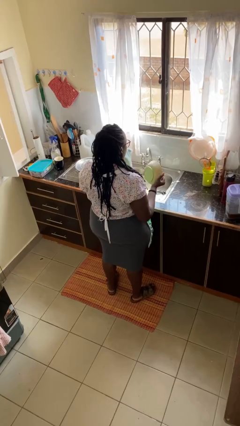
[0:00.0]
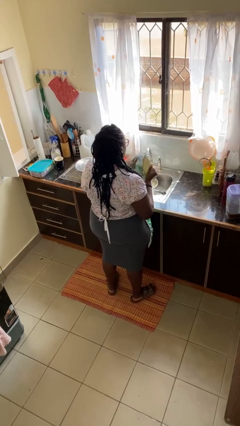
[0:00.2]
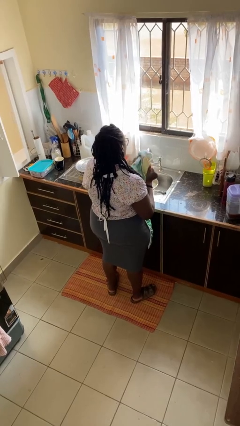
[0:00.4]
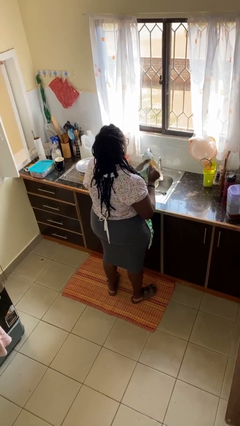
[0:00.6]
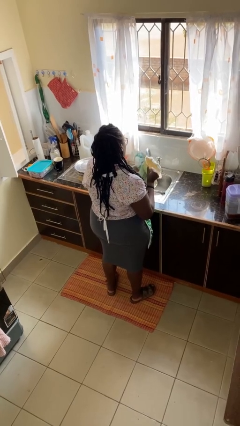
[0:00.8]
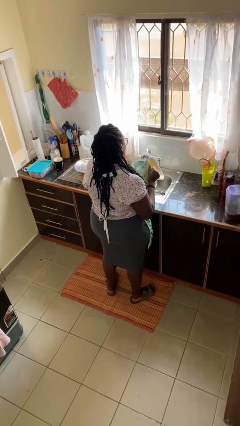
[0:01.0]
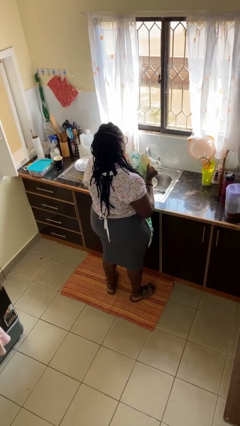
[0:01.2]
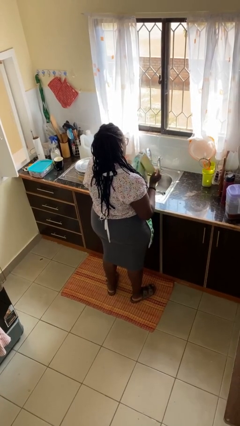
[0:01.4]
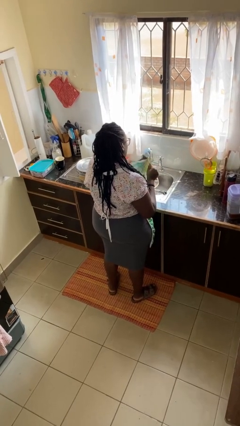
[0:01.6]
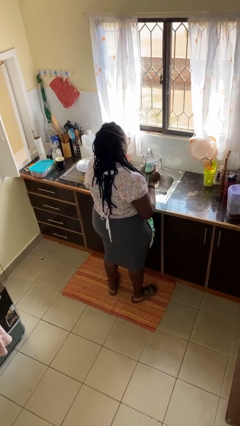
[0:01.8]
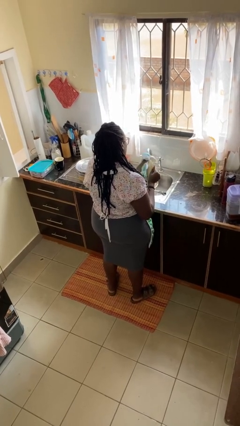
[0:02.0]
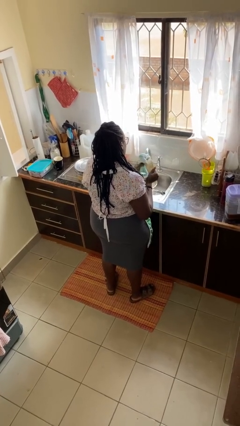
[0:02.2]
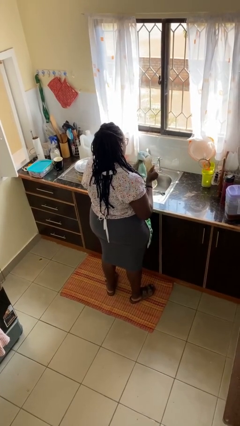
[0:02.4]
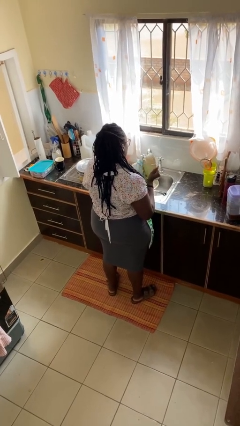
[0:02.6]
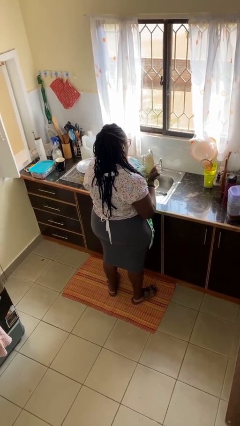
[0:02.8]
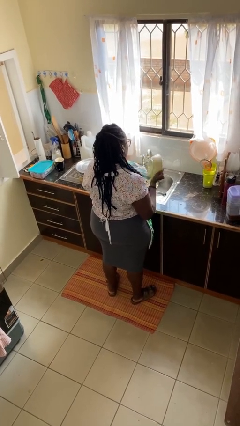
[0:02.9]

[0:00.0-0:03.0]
person dries dish

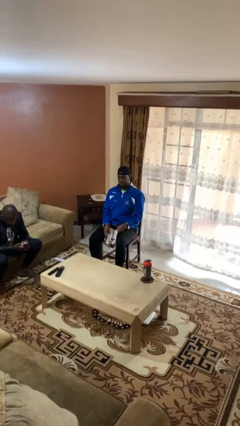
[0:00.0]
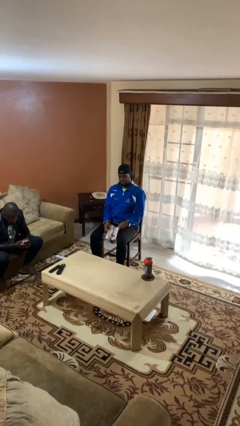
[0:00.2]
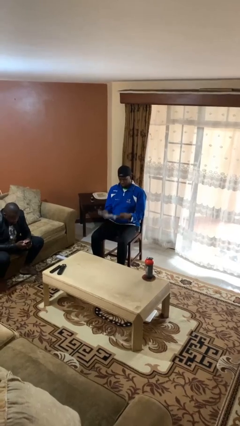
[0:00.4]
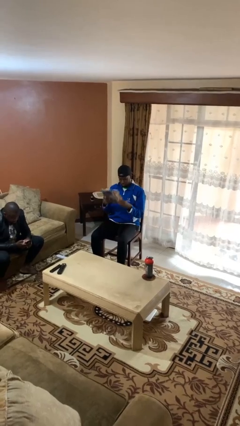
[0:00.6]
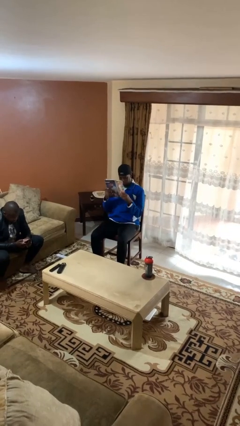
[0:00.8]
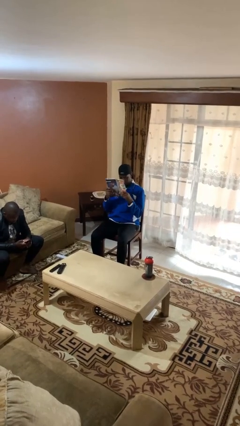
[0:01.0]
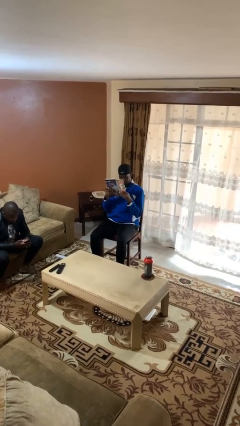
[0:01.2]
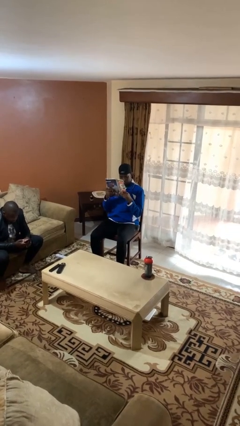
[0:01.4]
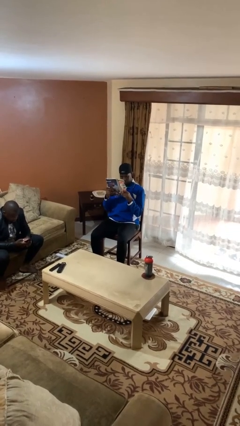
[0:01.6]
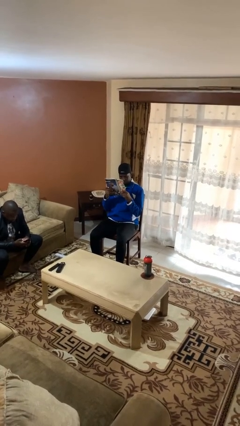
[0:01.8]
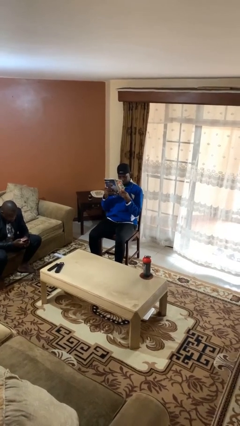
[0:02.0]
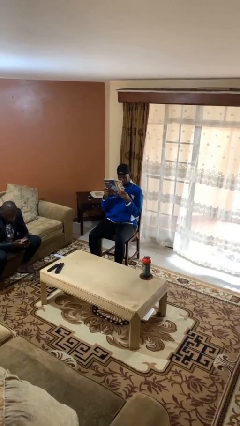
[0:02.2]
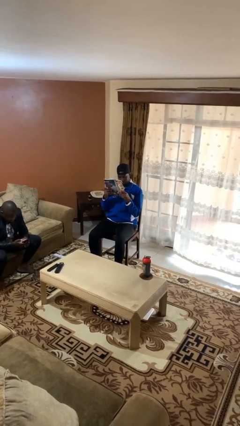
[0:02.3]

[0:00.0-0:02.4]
person reads document

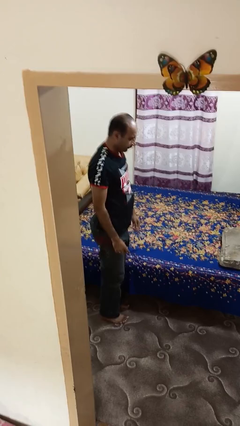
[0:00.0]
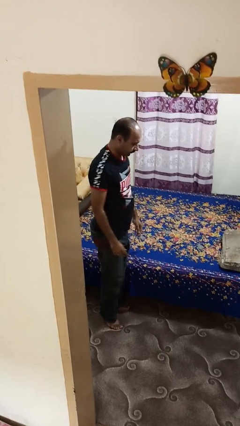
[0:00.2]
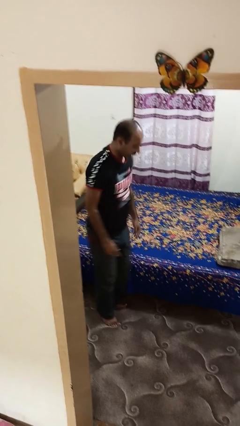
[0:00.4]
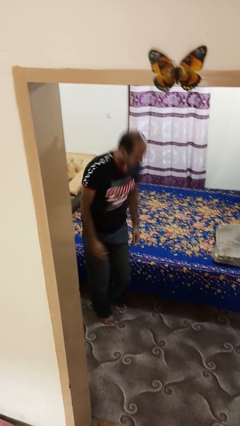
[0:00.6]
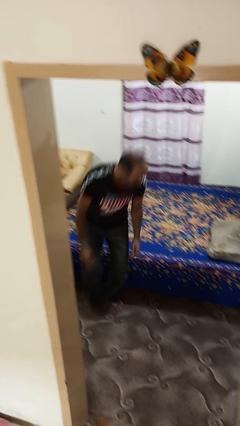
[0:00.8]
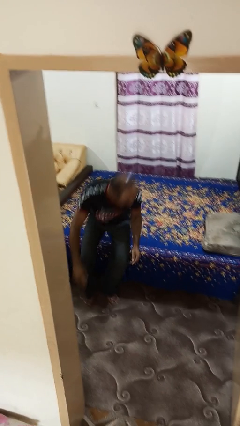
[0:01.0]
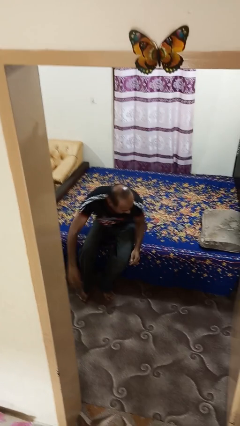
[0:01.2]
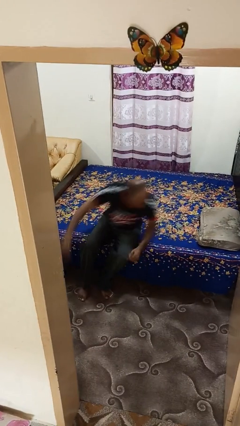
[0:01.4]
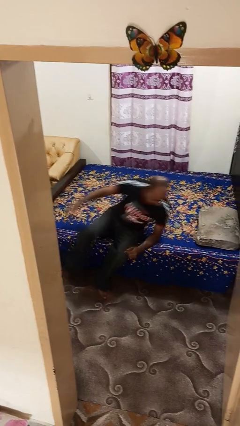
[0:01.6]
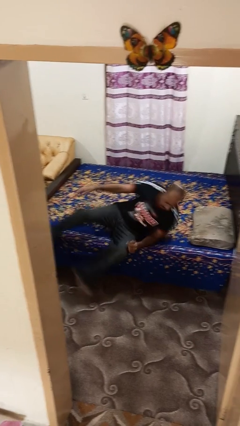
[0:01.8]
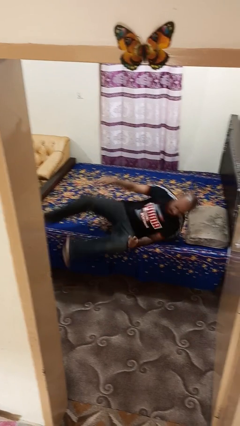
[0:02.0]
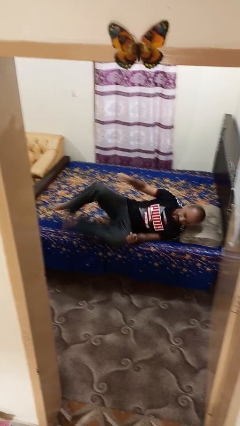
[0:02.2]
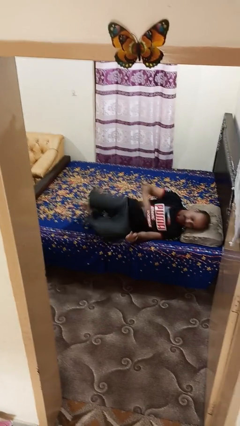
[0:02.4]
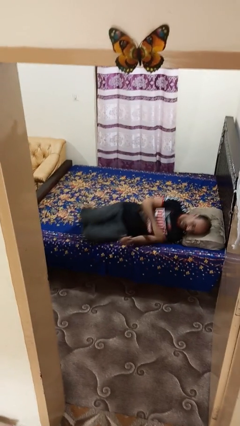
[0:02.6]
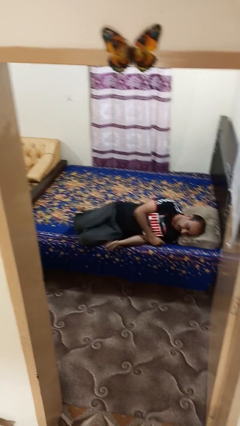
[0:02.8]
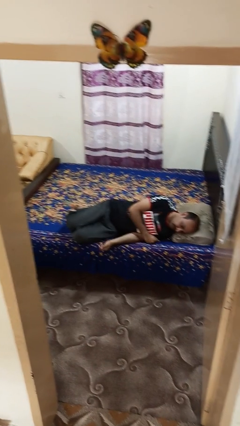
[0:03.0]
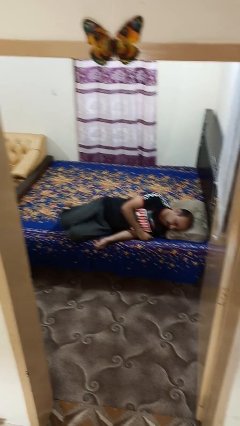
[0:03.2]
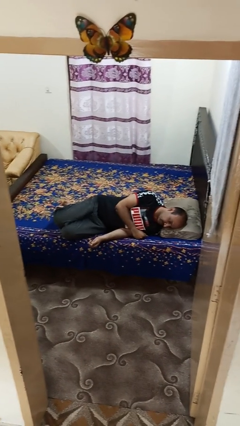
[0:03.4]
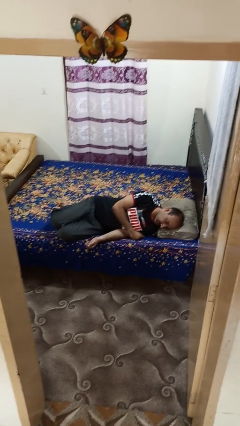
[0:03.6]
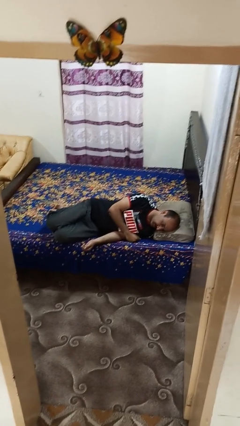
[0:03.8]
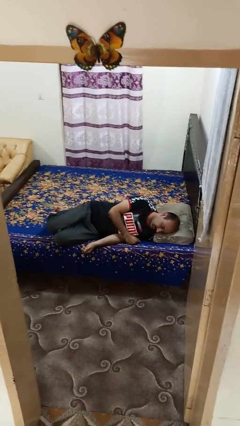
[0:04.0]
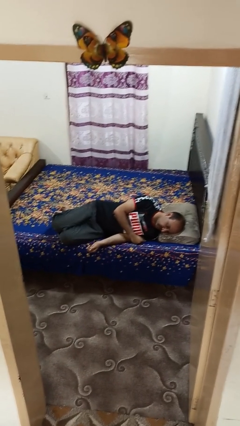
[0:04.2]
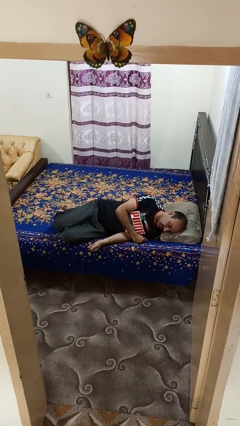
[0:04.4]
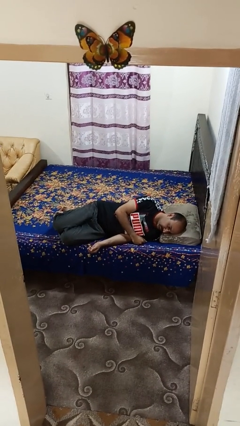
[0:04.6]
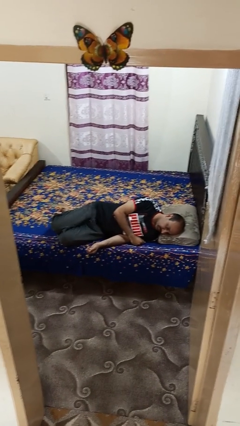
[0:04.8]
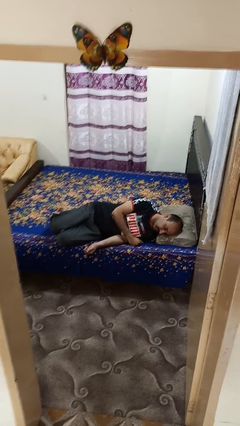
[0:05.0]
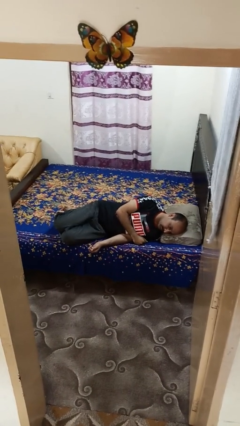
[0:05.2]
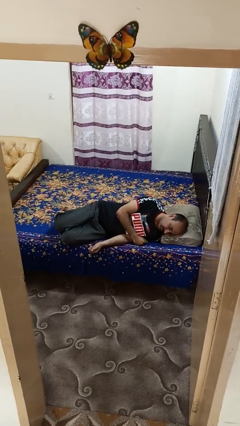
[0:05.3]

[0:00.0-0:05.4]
person lies down on bed

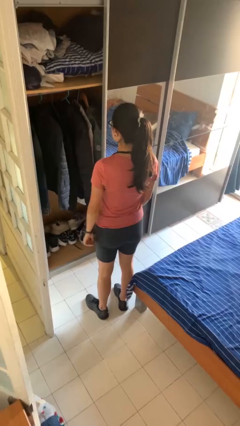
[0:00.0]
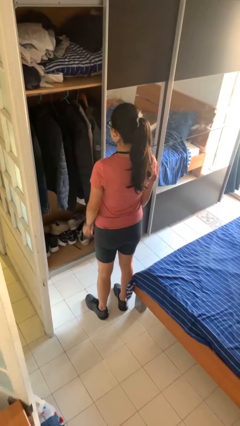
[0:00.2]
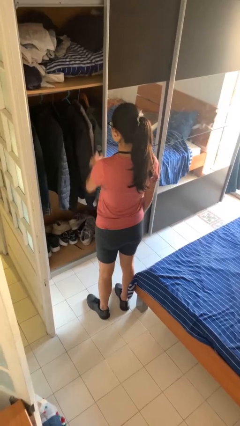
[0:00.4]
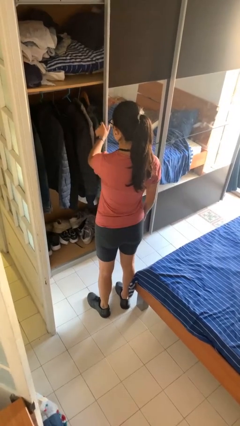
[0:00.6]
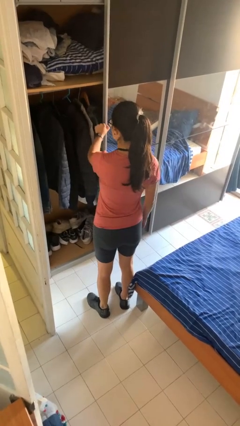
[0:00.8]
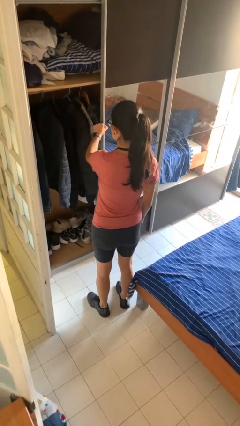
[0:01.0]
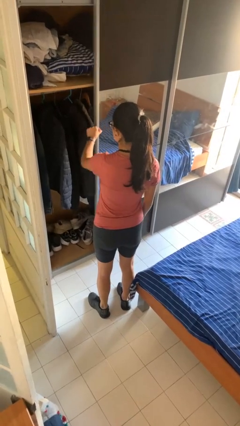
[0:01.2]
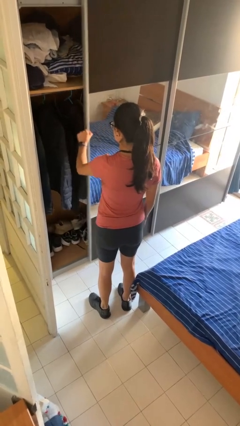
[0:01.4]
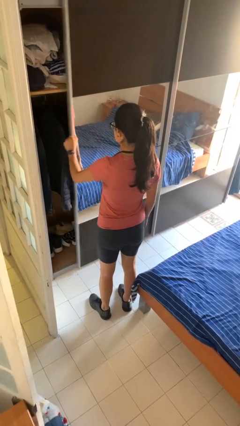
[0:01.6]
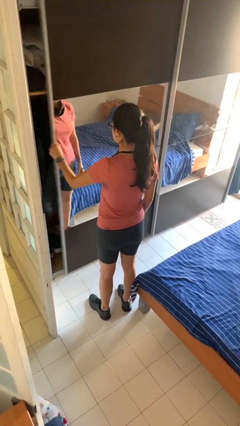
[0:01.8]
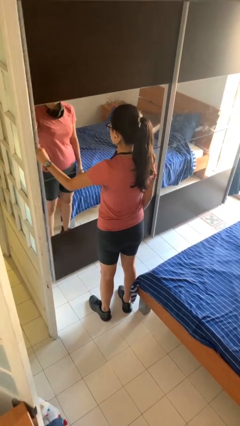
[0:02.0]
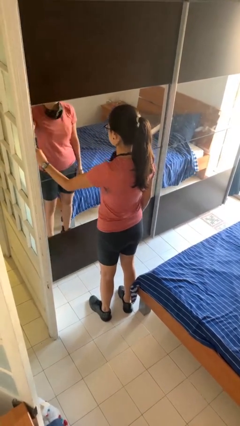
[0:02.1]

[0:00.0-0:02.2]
person closes dresser drawer

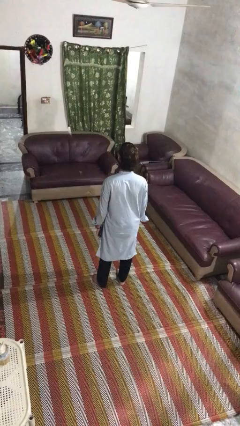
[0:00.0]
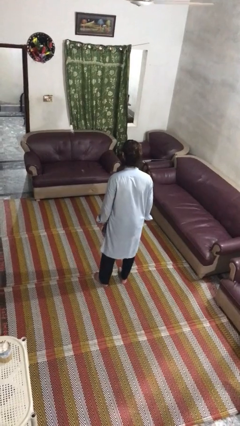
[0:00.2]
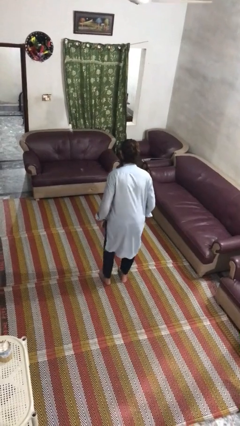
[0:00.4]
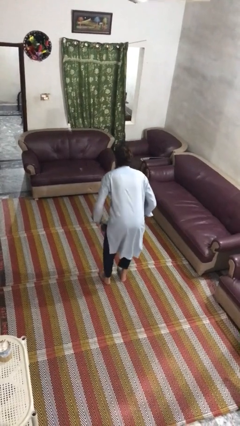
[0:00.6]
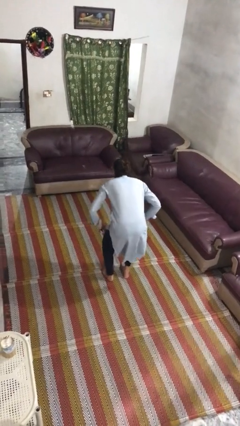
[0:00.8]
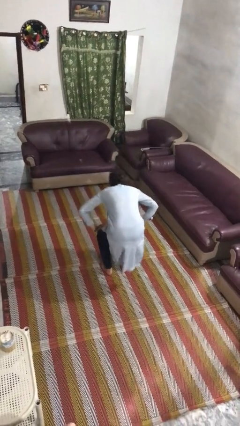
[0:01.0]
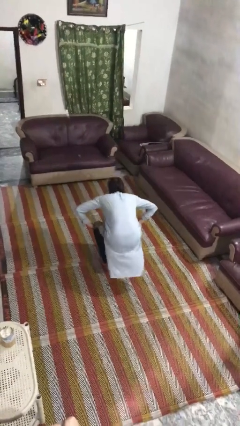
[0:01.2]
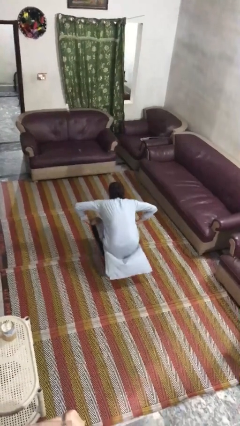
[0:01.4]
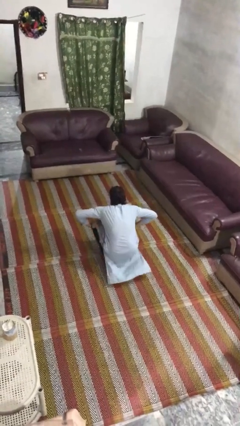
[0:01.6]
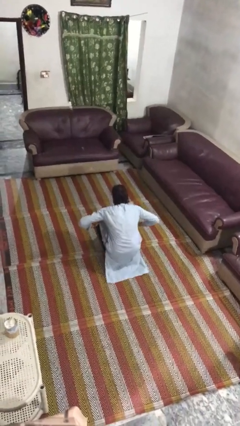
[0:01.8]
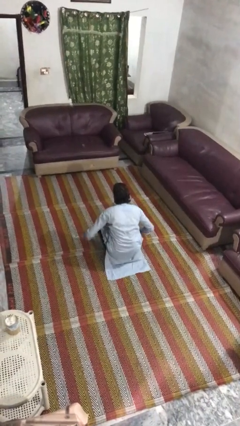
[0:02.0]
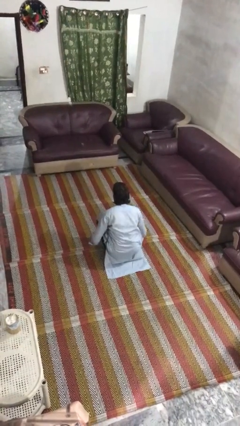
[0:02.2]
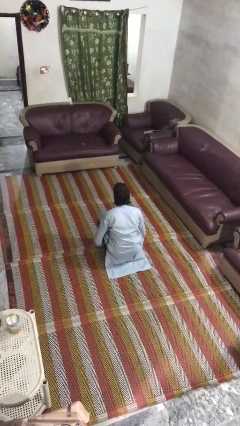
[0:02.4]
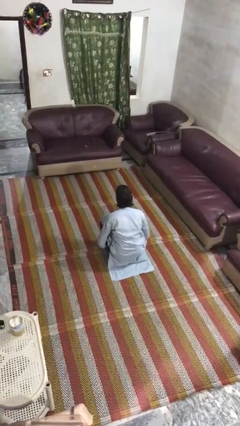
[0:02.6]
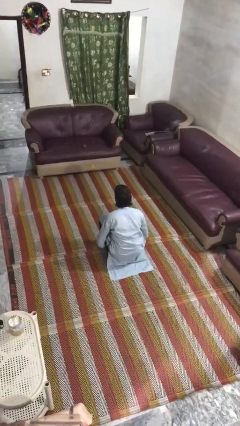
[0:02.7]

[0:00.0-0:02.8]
person squats

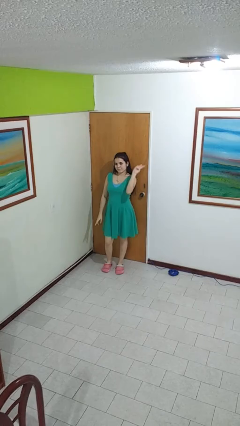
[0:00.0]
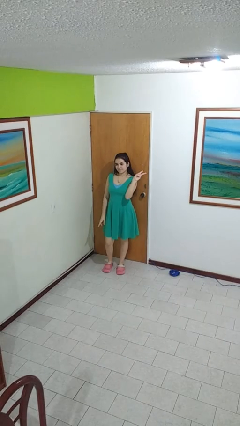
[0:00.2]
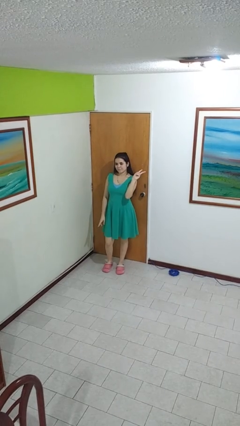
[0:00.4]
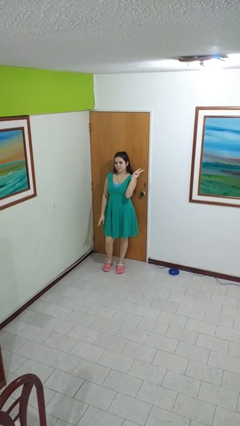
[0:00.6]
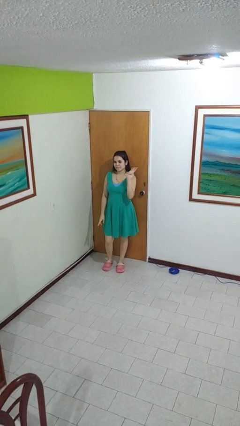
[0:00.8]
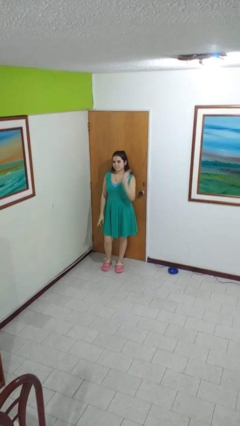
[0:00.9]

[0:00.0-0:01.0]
person gestures peace

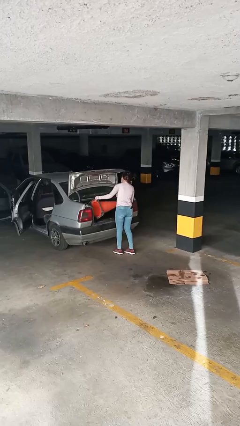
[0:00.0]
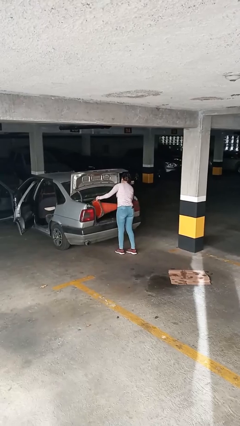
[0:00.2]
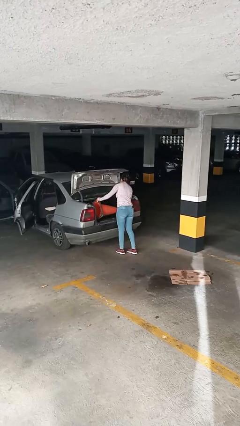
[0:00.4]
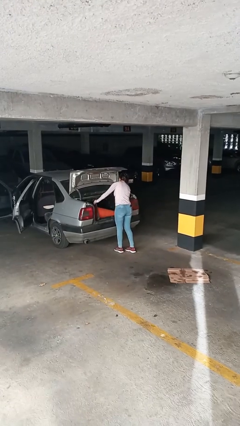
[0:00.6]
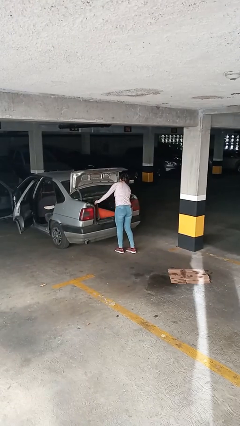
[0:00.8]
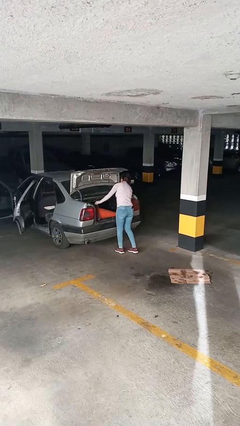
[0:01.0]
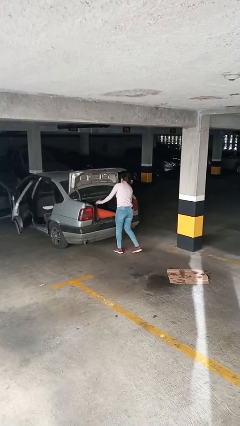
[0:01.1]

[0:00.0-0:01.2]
person loads car
